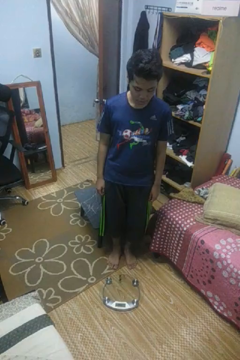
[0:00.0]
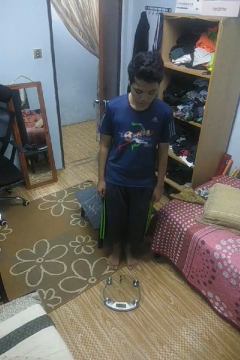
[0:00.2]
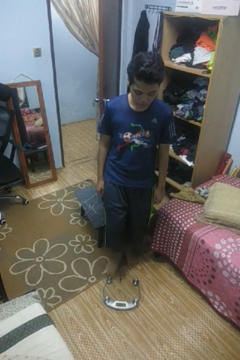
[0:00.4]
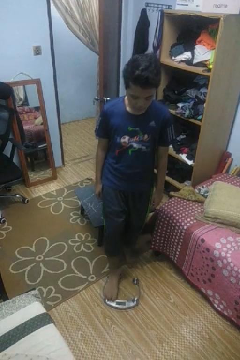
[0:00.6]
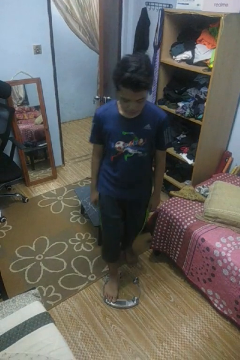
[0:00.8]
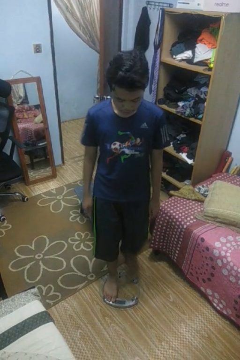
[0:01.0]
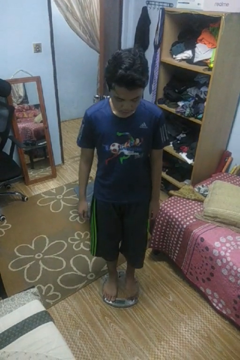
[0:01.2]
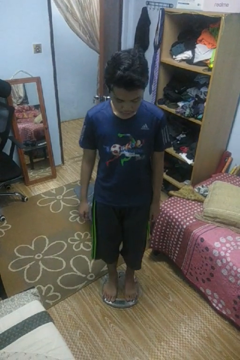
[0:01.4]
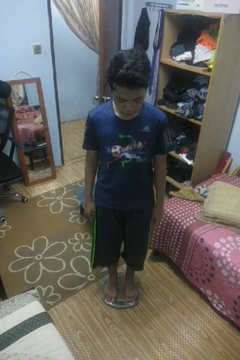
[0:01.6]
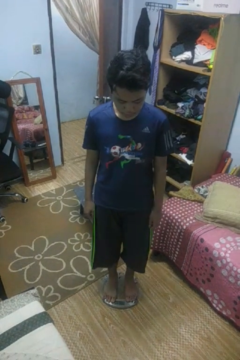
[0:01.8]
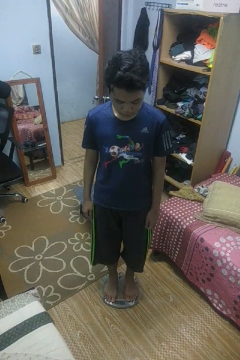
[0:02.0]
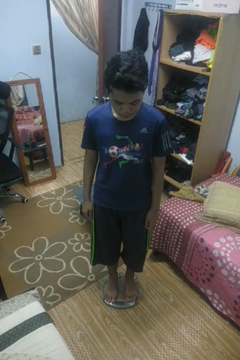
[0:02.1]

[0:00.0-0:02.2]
person uses bodyweight scale

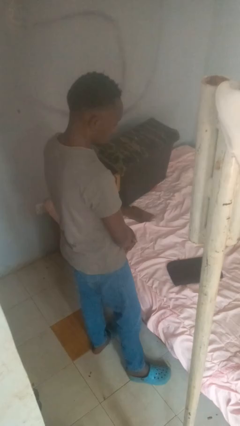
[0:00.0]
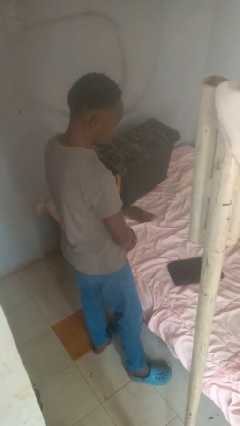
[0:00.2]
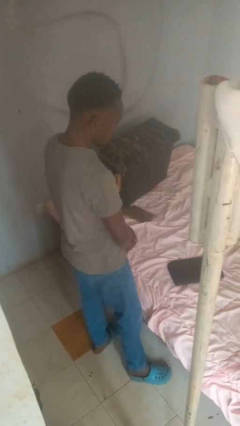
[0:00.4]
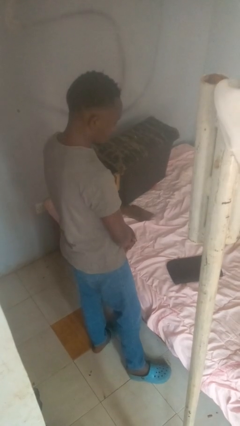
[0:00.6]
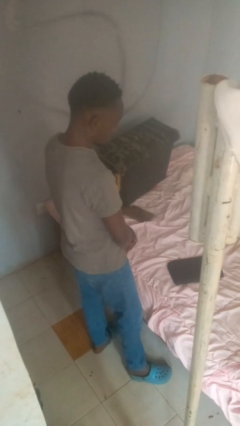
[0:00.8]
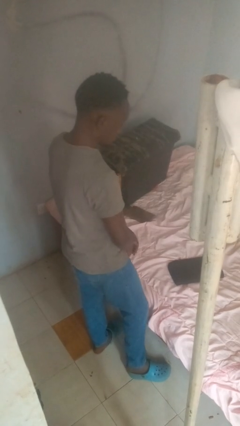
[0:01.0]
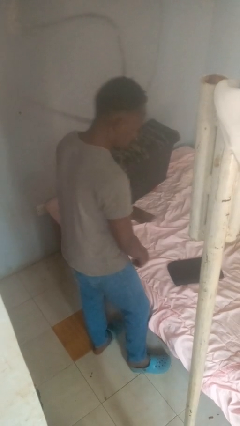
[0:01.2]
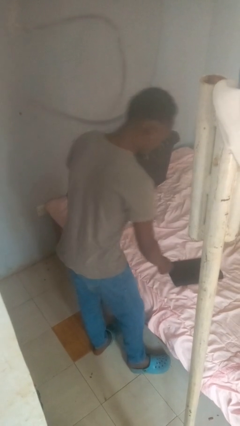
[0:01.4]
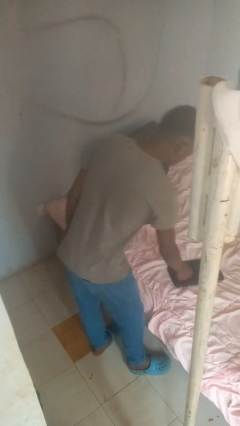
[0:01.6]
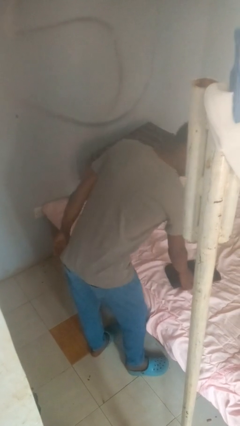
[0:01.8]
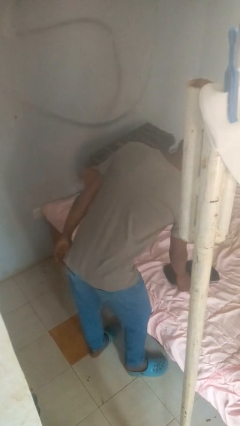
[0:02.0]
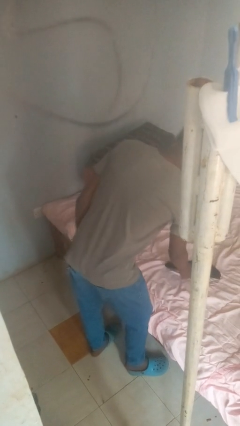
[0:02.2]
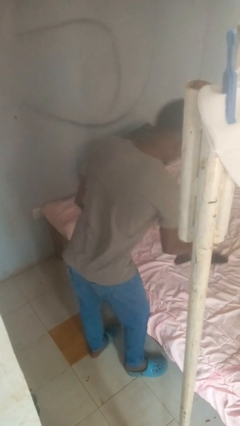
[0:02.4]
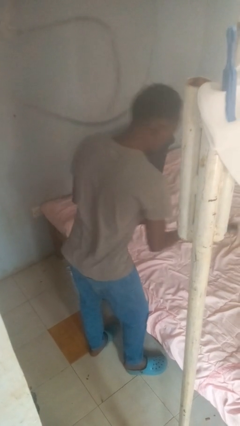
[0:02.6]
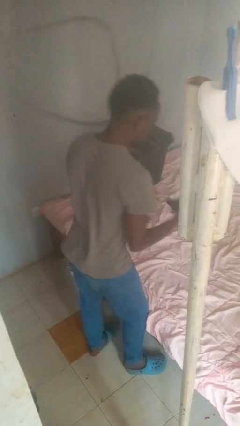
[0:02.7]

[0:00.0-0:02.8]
person picks up object from bed

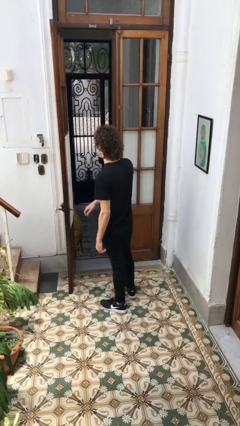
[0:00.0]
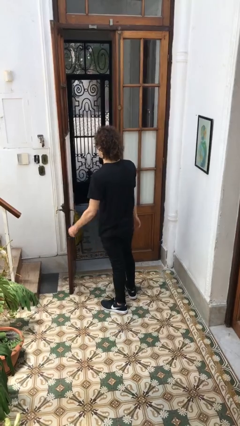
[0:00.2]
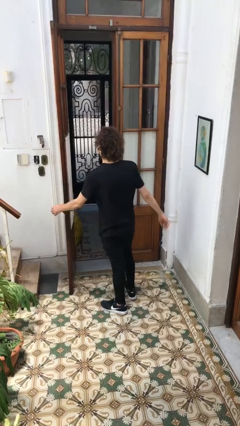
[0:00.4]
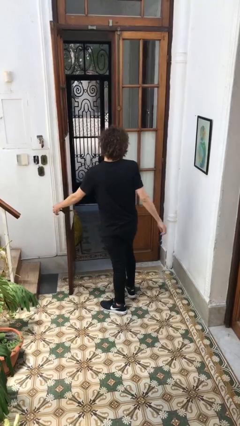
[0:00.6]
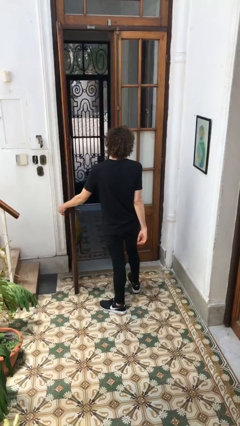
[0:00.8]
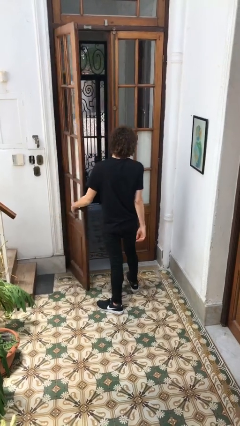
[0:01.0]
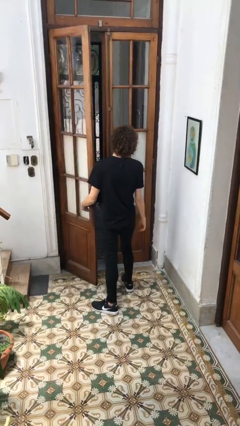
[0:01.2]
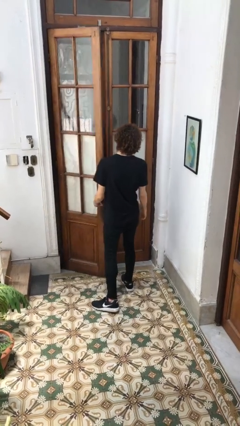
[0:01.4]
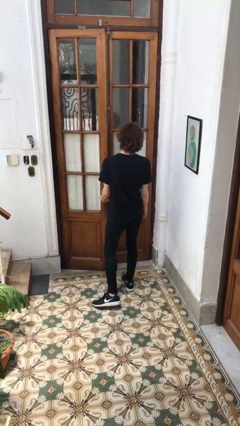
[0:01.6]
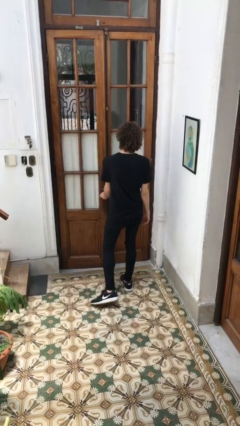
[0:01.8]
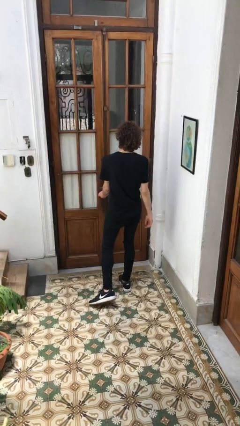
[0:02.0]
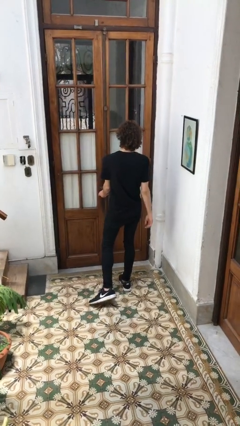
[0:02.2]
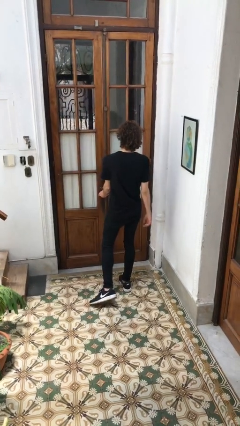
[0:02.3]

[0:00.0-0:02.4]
person closes facility door

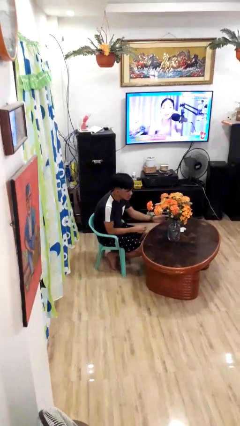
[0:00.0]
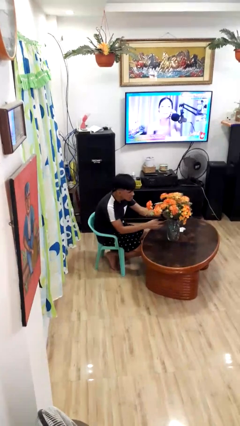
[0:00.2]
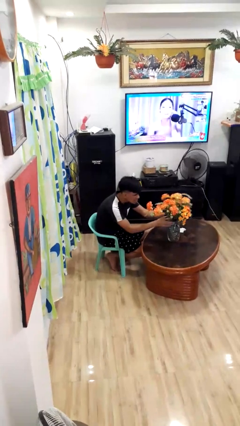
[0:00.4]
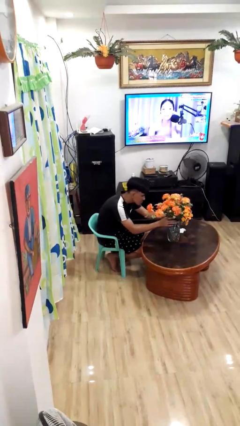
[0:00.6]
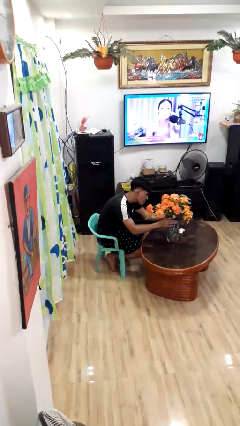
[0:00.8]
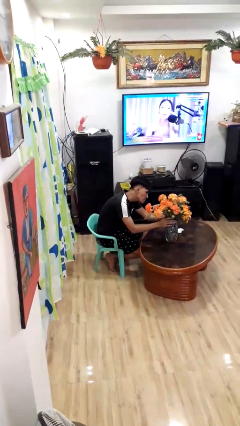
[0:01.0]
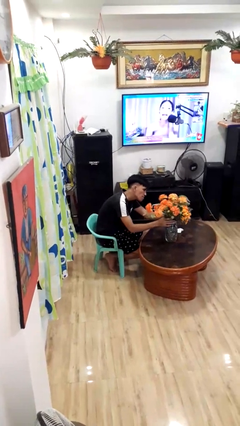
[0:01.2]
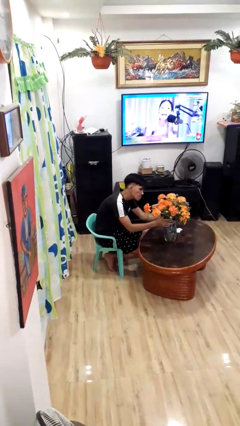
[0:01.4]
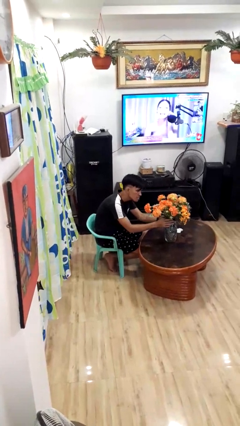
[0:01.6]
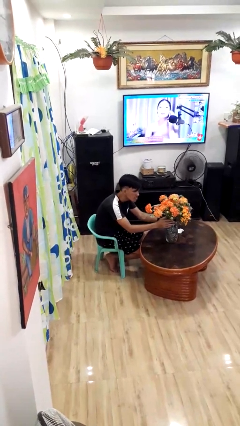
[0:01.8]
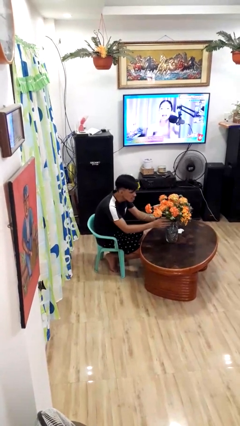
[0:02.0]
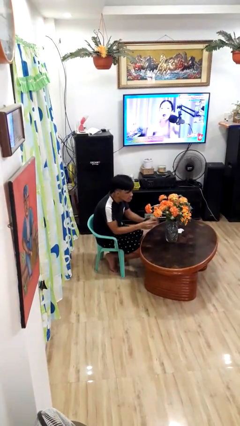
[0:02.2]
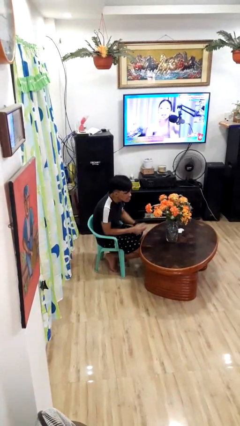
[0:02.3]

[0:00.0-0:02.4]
person arranges flowers in vase

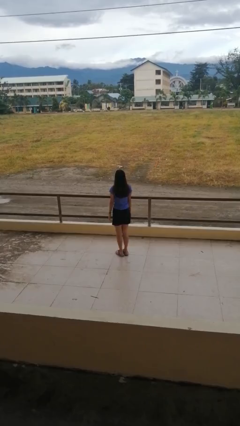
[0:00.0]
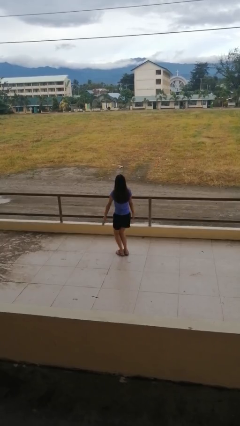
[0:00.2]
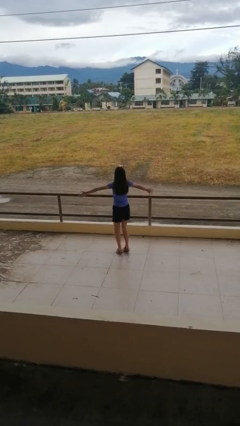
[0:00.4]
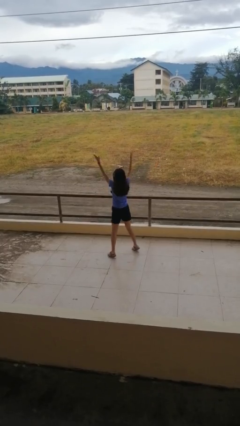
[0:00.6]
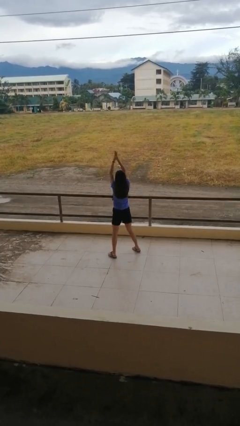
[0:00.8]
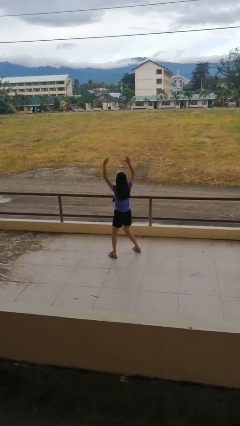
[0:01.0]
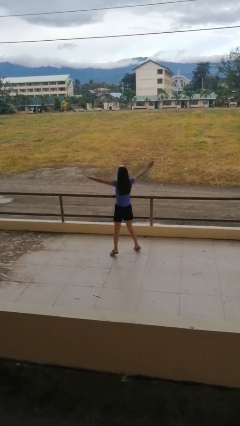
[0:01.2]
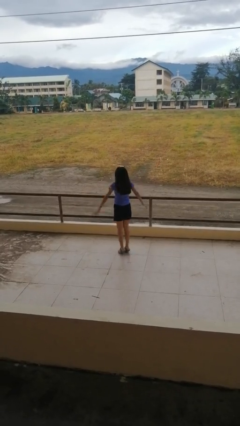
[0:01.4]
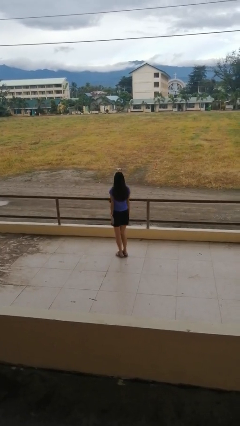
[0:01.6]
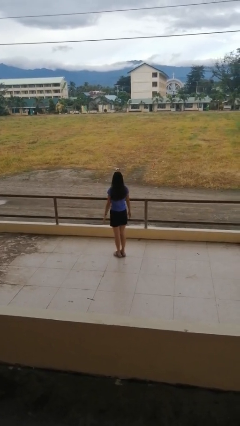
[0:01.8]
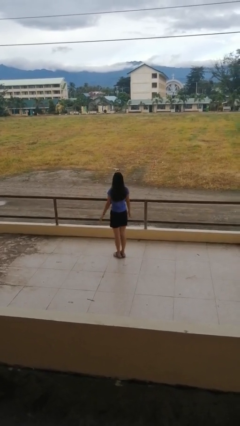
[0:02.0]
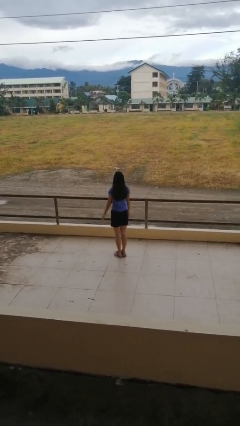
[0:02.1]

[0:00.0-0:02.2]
person exercises with jumping jacks

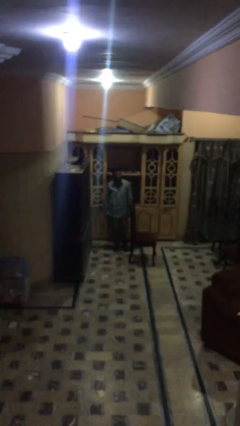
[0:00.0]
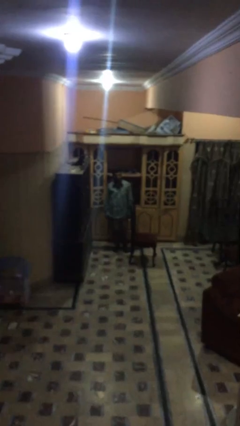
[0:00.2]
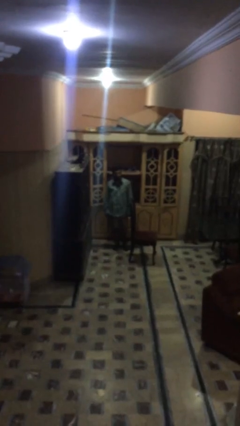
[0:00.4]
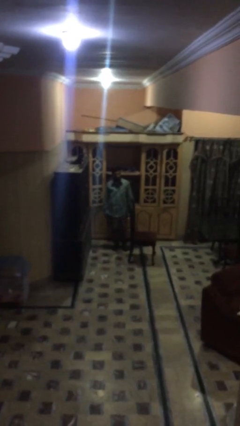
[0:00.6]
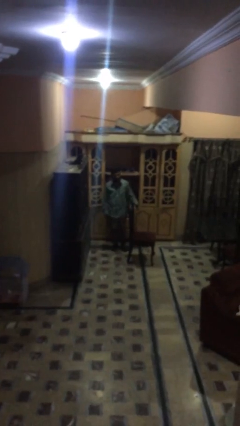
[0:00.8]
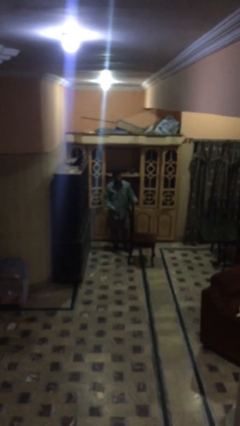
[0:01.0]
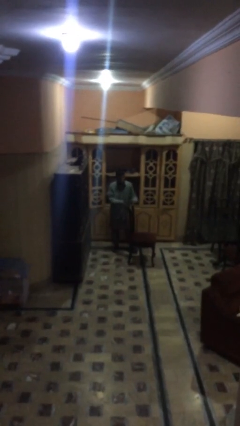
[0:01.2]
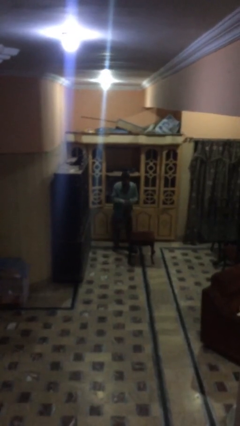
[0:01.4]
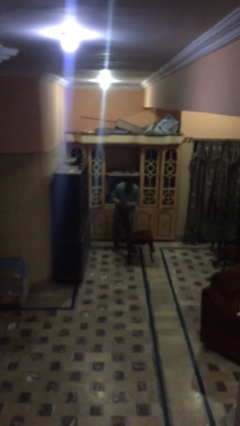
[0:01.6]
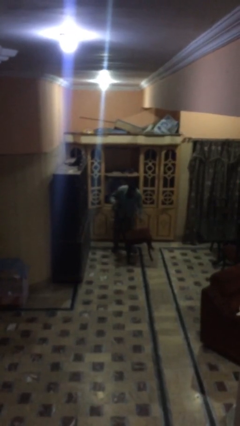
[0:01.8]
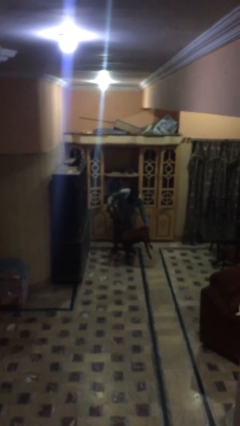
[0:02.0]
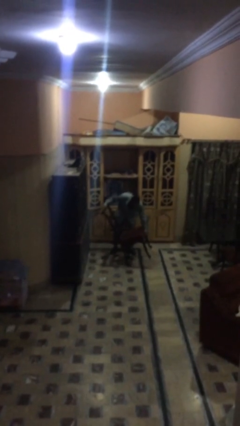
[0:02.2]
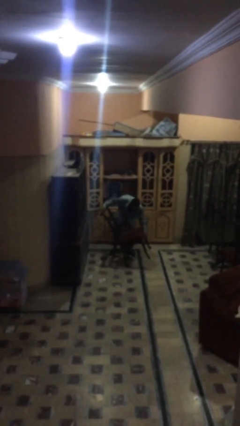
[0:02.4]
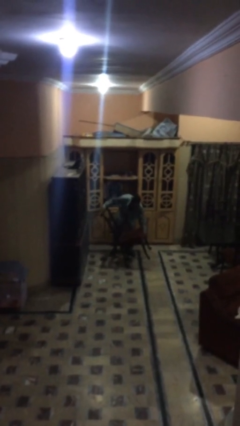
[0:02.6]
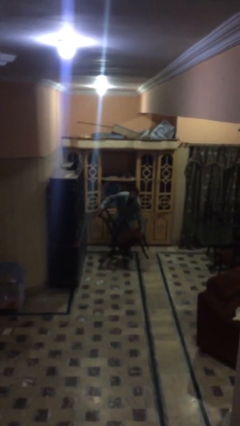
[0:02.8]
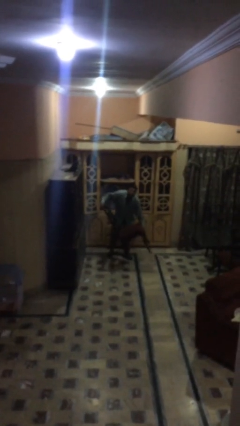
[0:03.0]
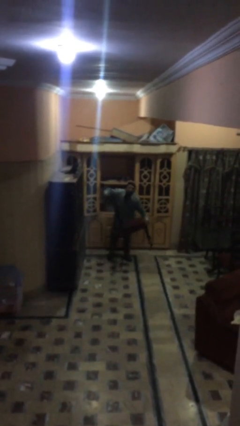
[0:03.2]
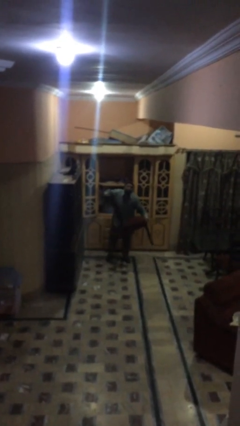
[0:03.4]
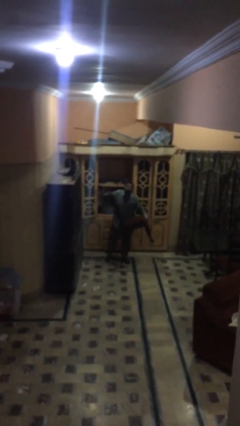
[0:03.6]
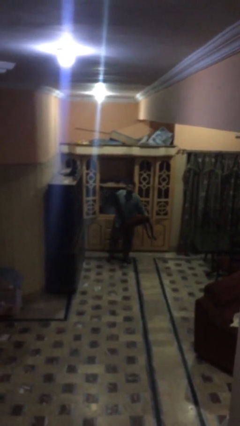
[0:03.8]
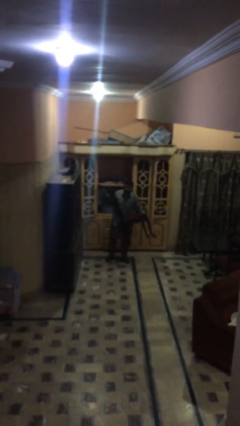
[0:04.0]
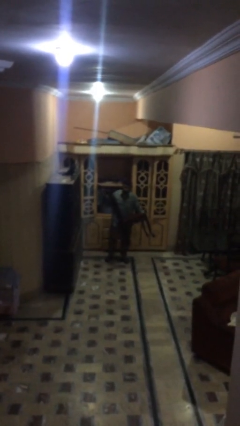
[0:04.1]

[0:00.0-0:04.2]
person picks up object from floor

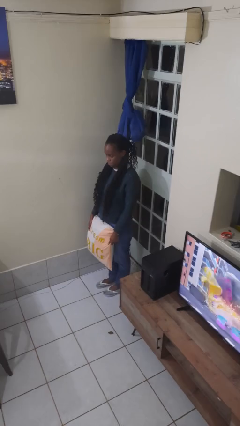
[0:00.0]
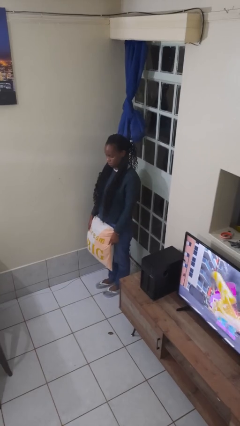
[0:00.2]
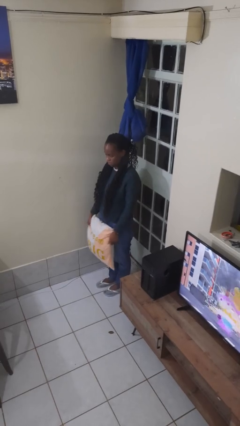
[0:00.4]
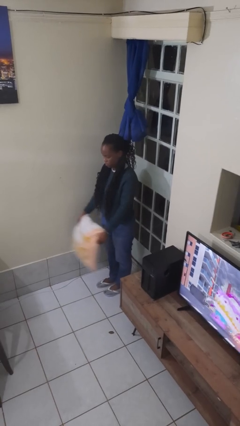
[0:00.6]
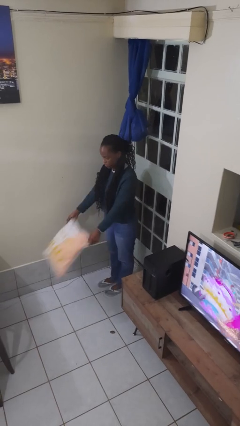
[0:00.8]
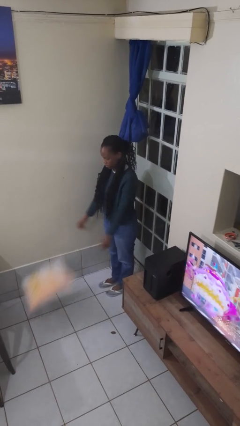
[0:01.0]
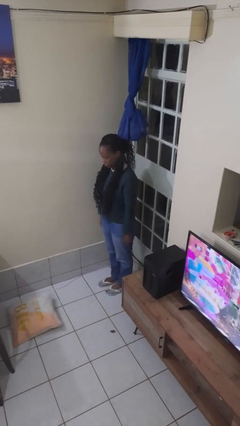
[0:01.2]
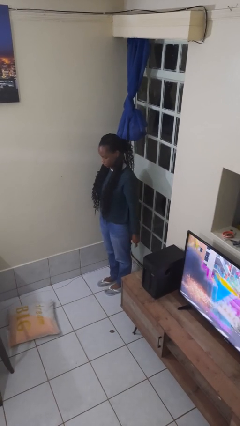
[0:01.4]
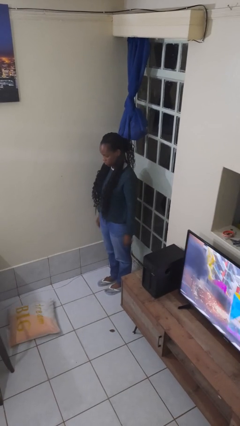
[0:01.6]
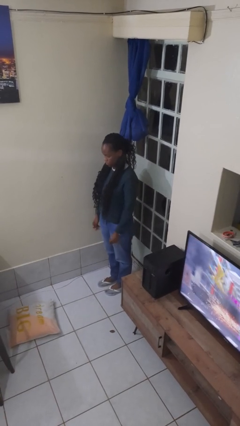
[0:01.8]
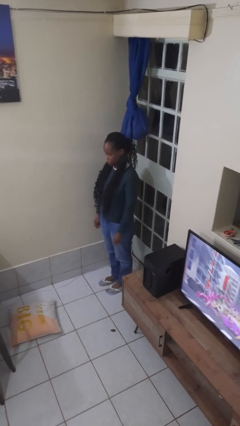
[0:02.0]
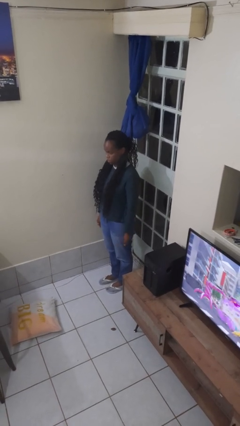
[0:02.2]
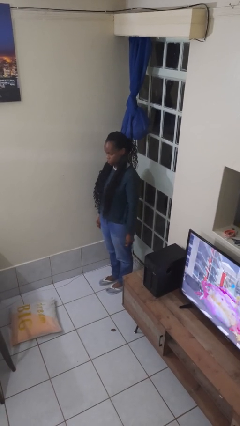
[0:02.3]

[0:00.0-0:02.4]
person throws object to ground
